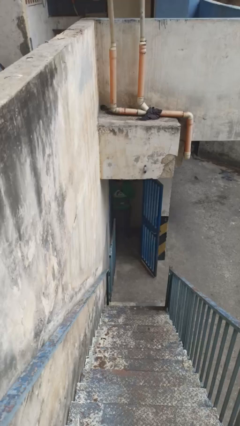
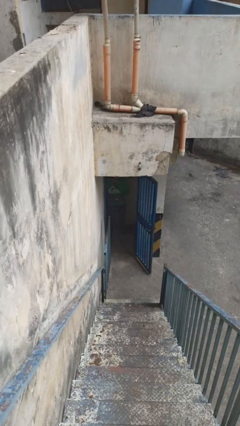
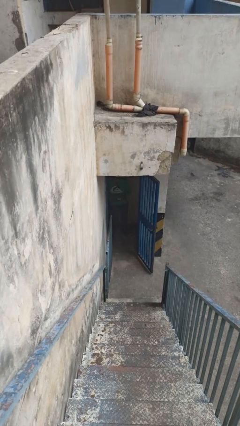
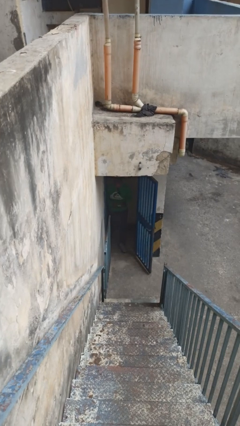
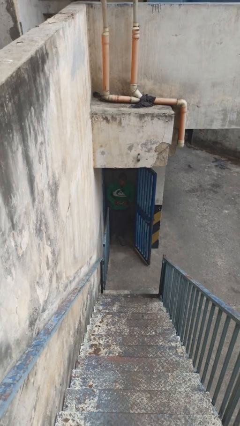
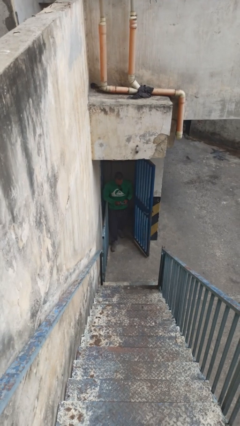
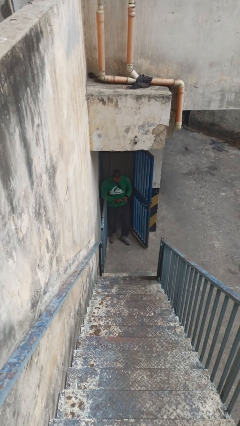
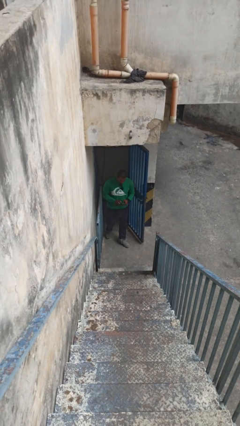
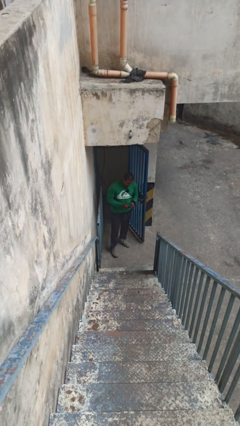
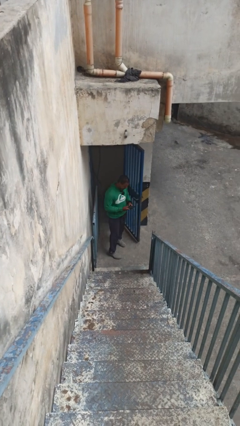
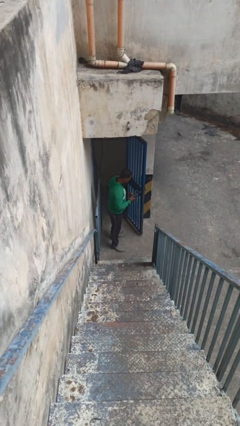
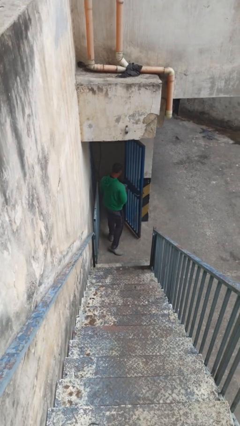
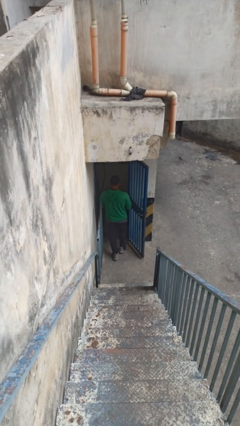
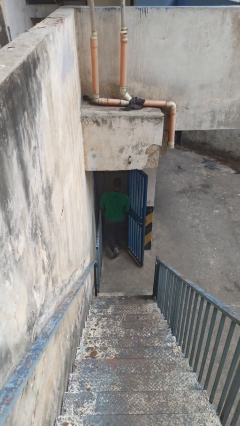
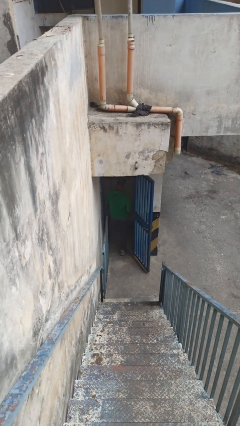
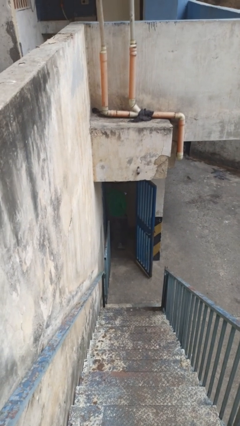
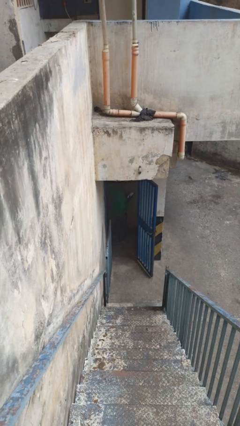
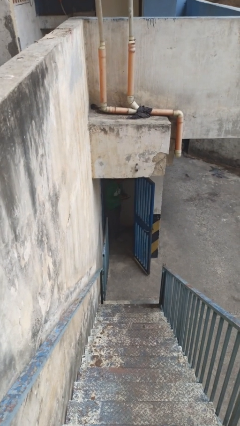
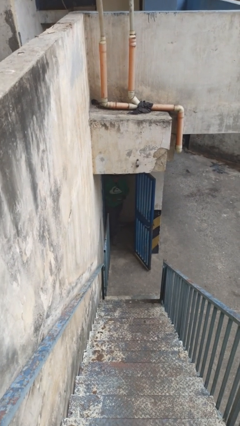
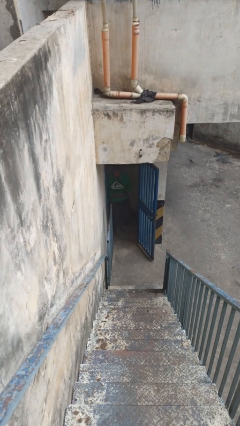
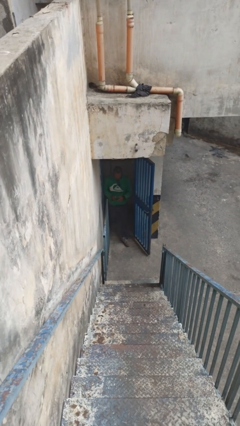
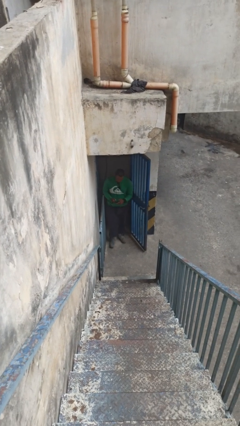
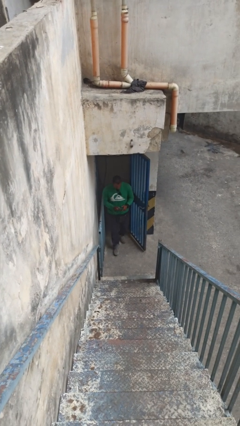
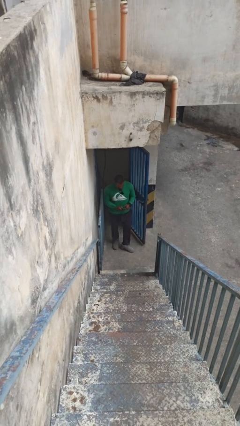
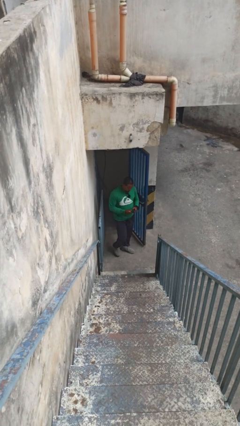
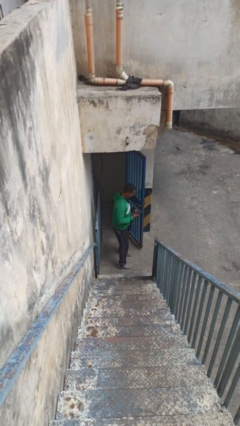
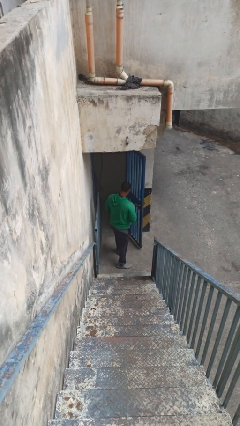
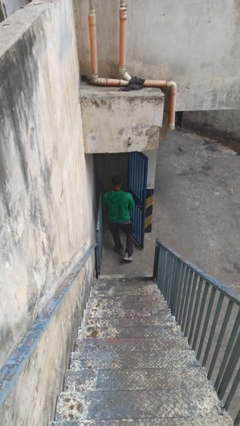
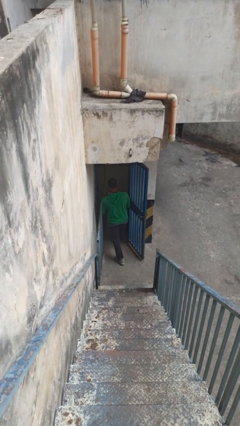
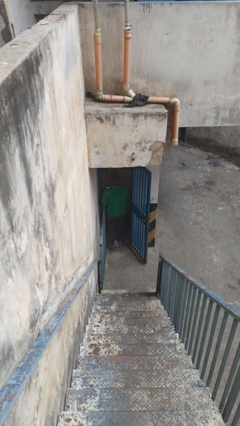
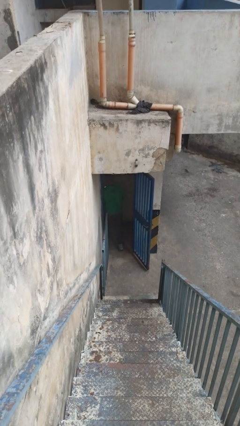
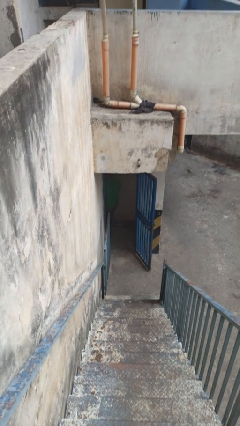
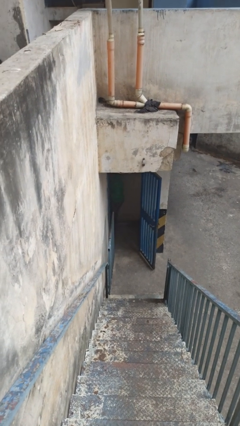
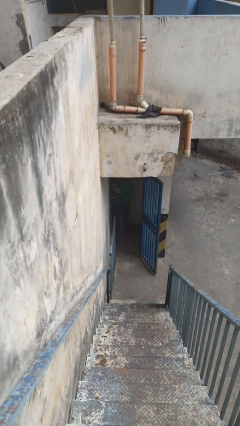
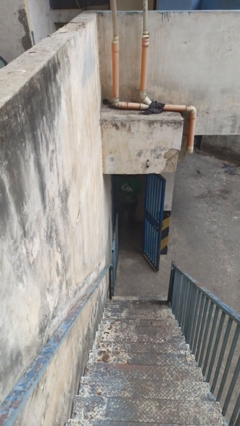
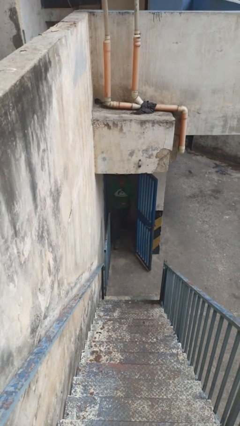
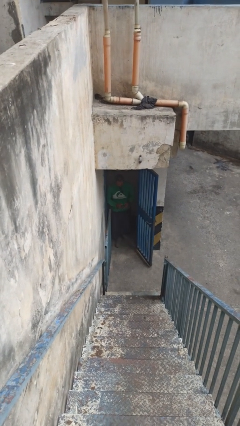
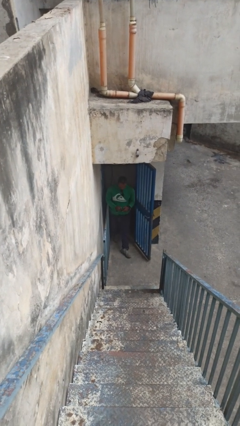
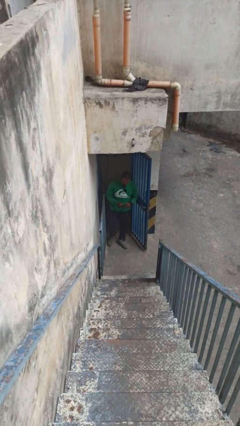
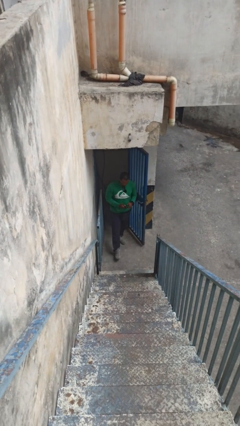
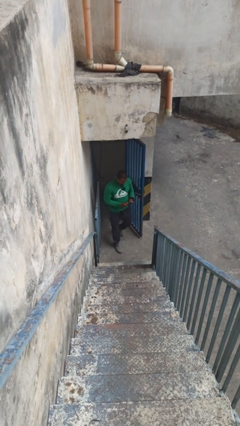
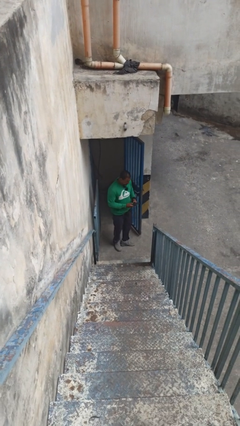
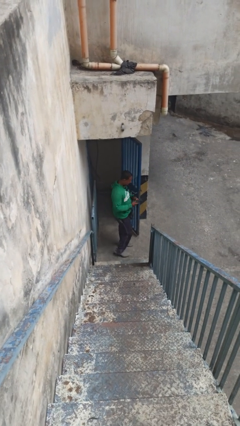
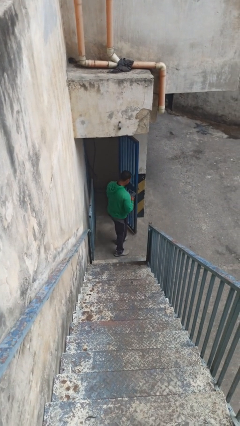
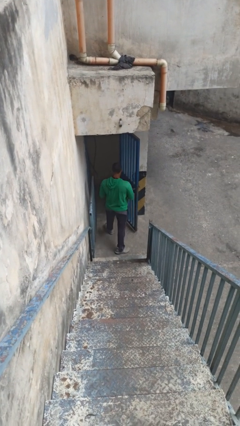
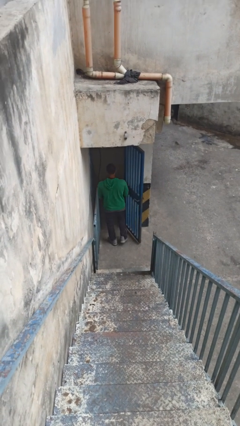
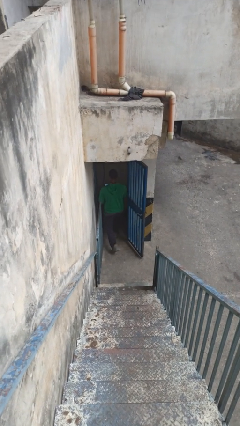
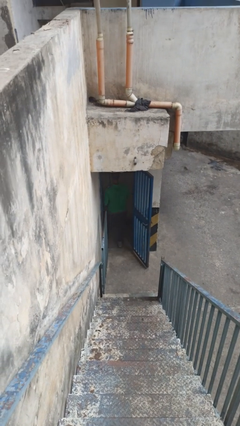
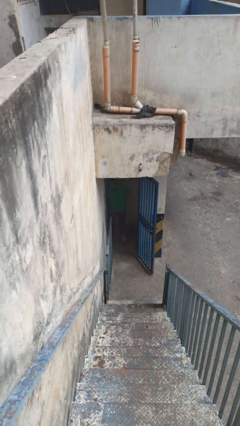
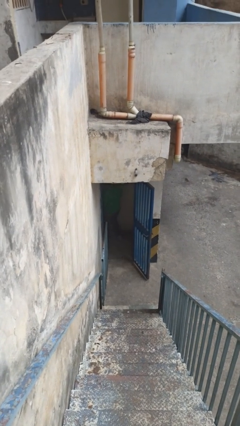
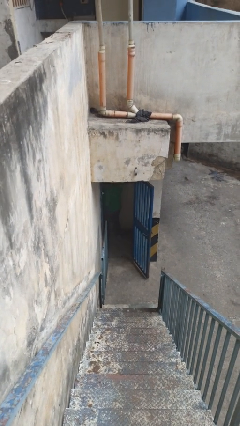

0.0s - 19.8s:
person texts on phone

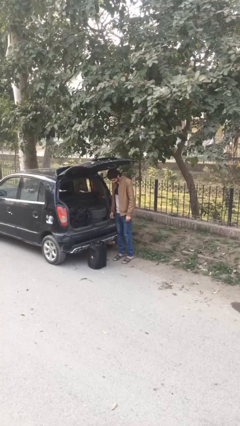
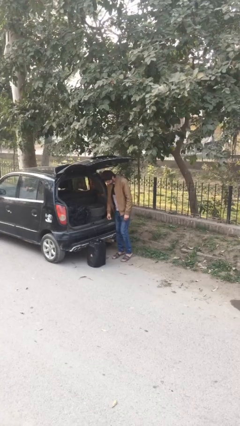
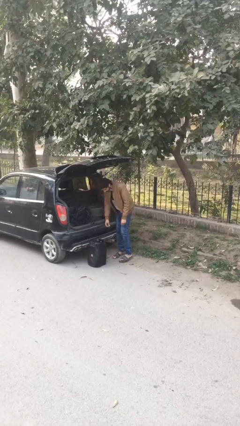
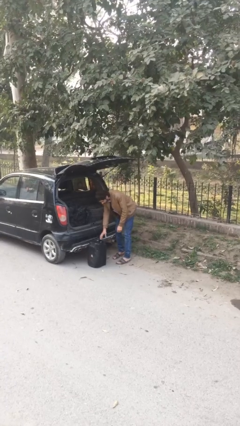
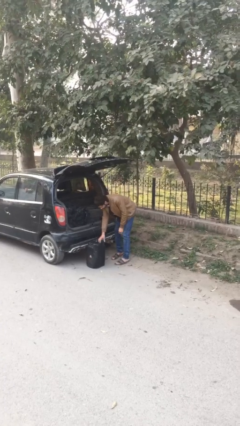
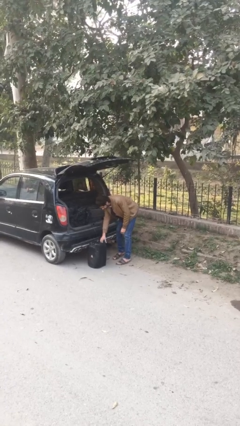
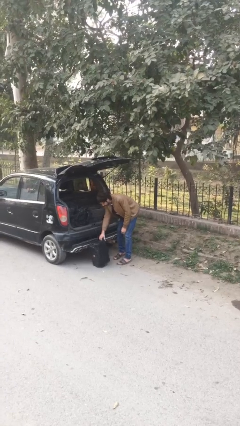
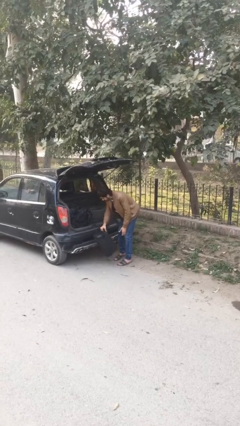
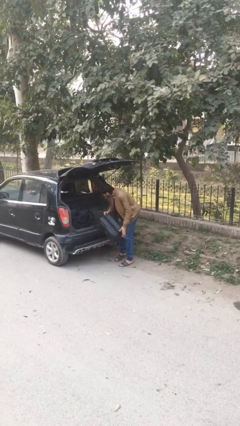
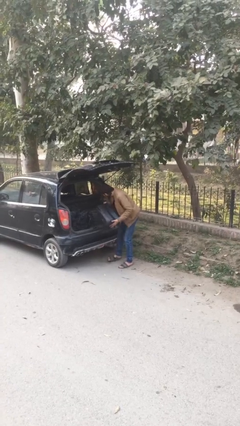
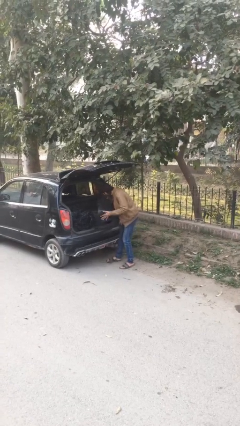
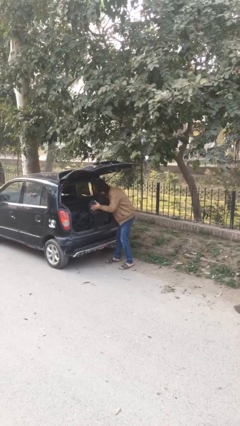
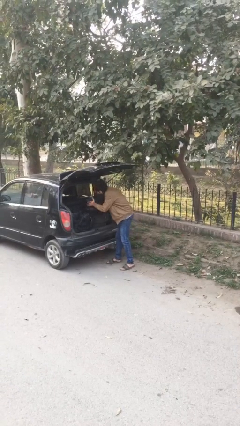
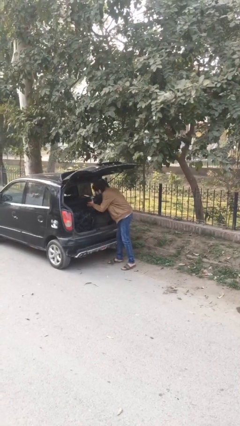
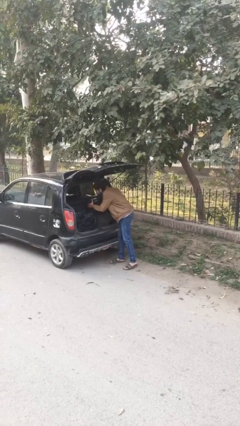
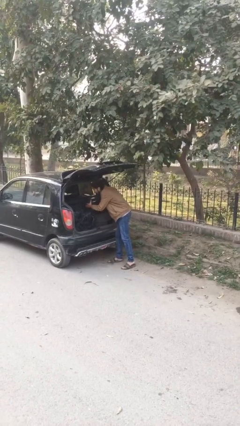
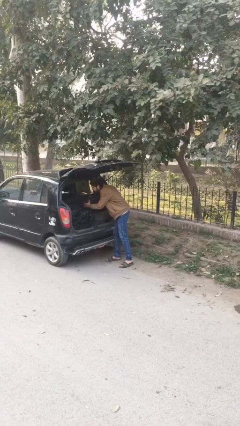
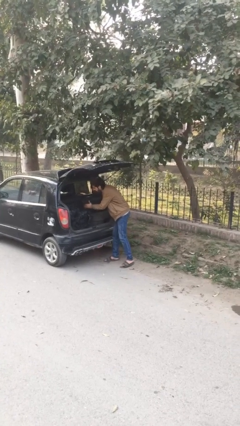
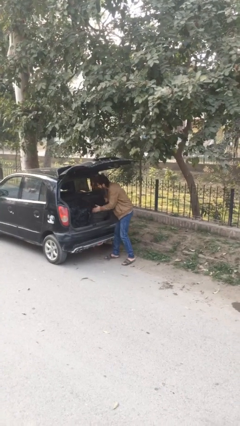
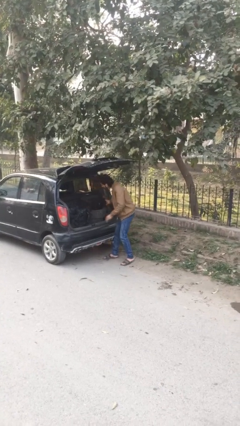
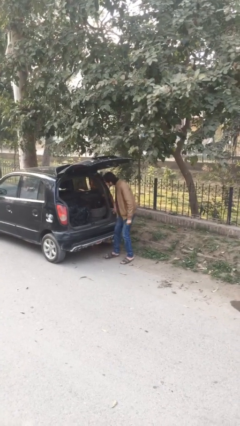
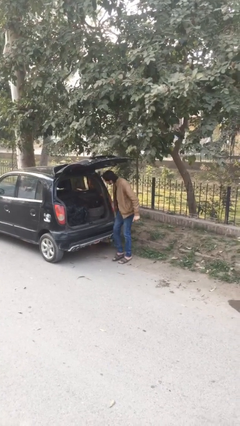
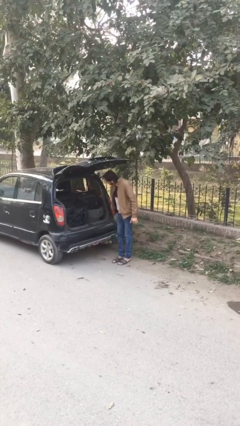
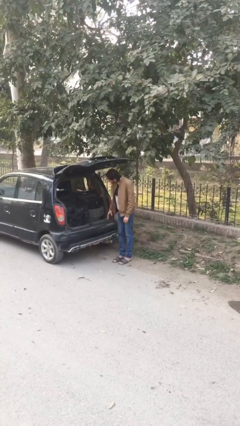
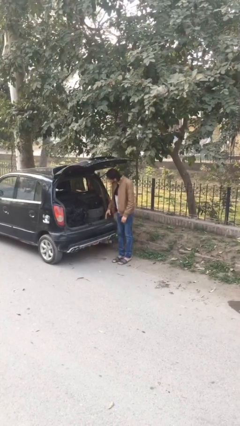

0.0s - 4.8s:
person loads car

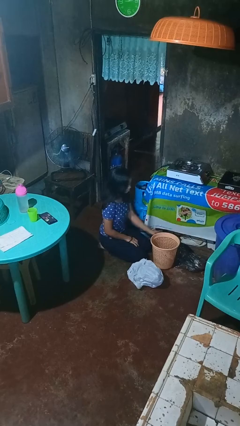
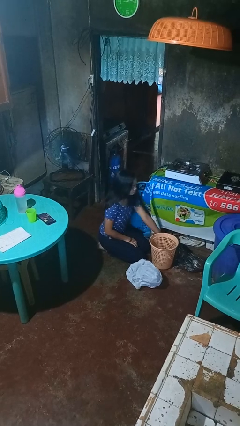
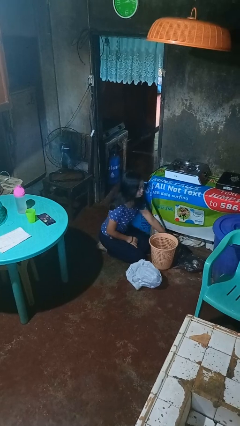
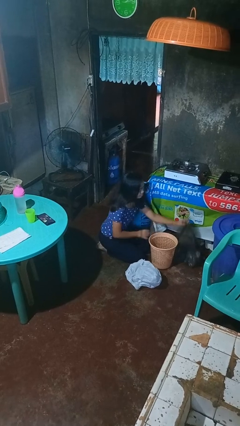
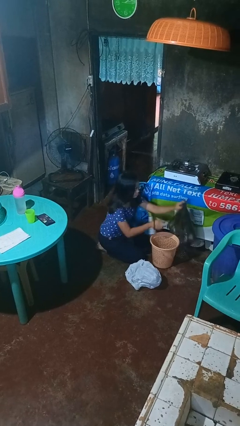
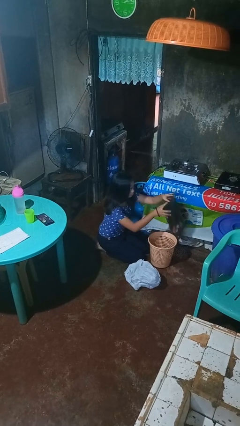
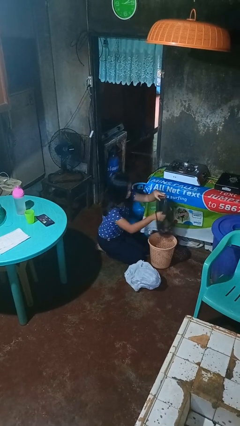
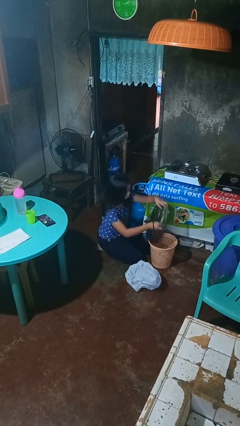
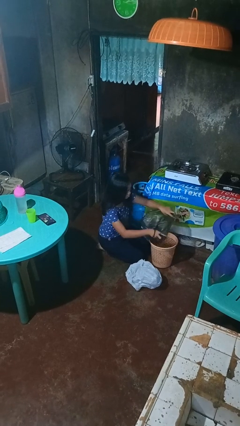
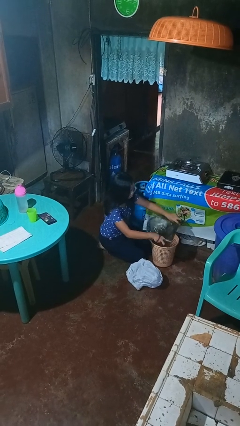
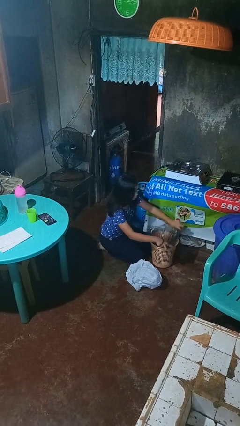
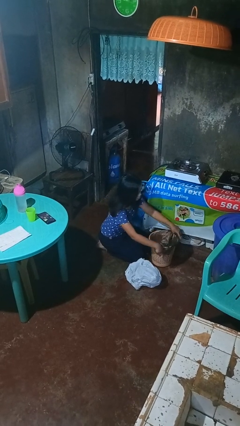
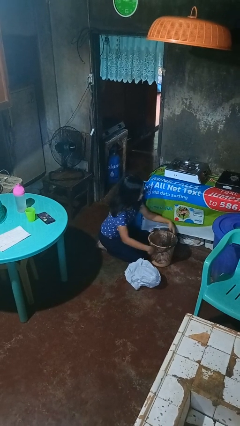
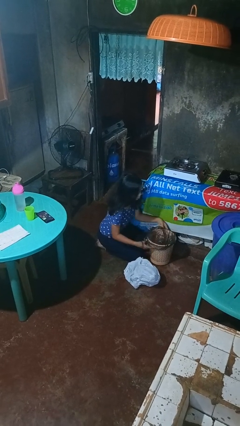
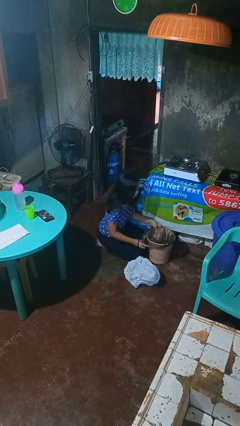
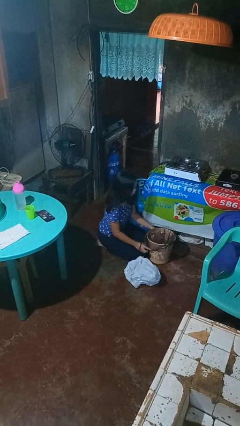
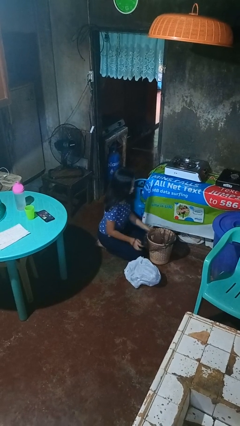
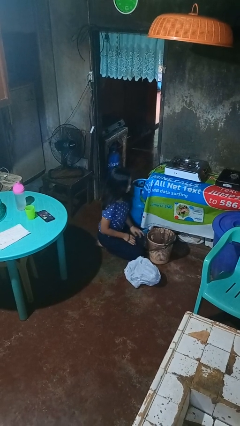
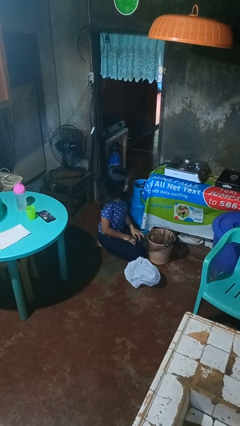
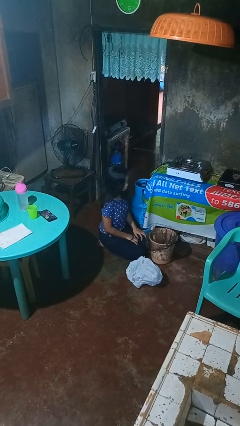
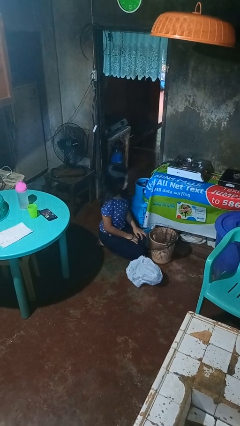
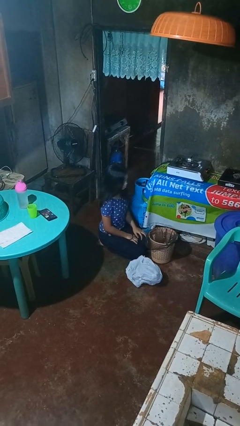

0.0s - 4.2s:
person inserts trashbag into trashcan
